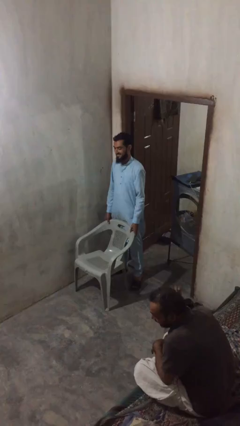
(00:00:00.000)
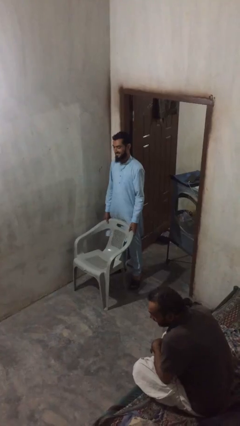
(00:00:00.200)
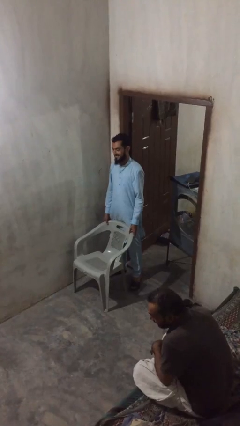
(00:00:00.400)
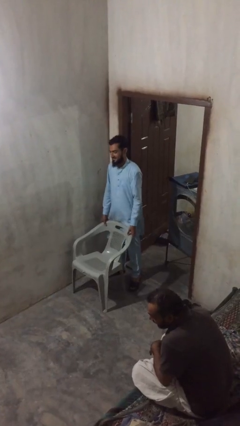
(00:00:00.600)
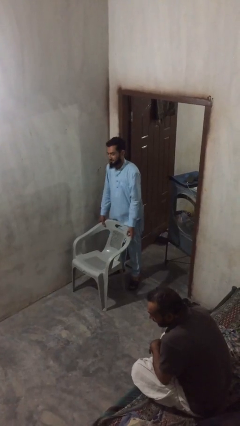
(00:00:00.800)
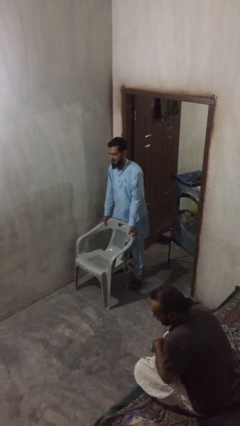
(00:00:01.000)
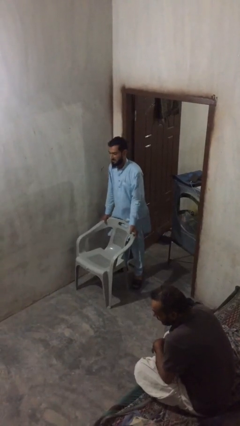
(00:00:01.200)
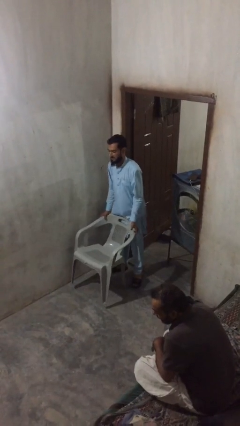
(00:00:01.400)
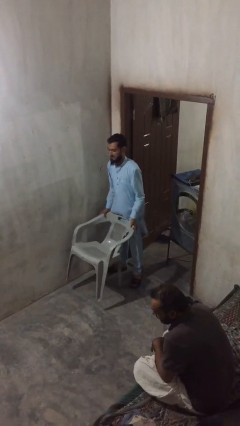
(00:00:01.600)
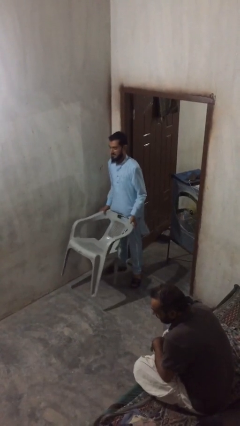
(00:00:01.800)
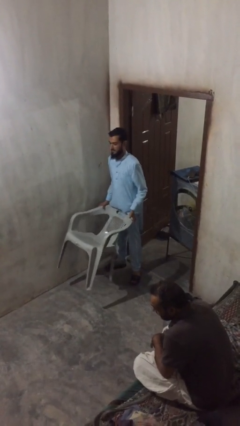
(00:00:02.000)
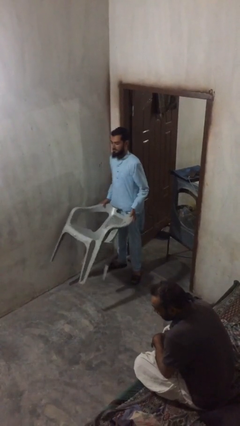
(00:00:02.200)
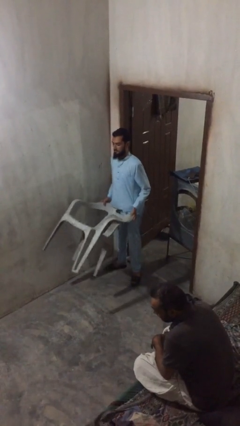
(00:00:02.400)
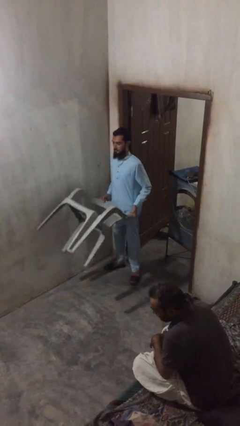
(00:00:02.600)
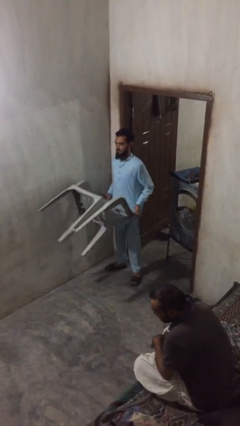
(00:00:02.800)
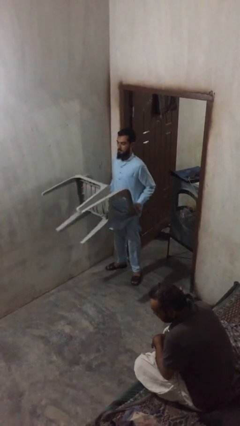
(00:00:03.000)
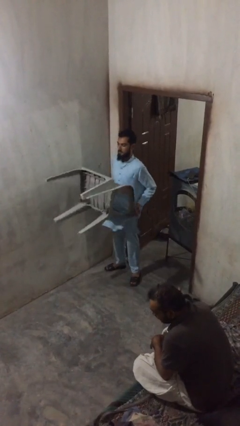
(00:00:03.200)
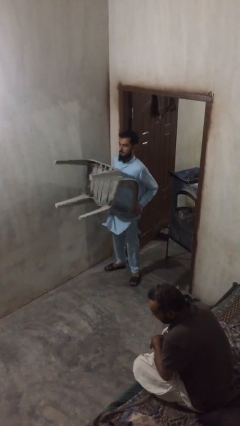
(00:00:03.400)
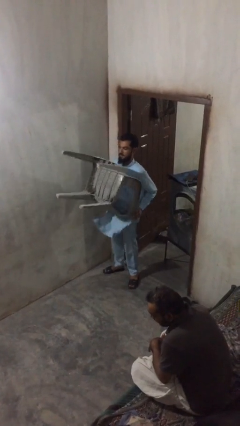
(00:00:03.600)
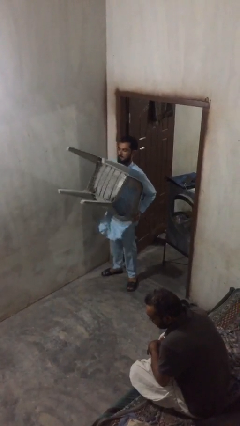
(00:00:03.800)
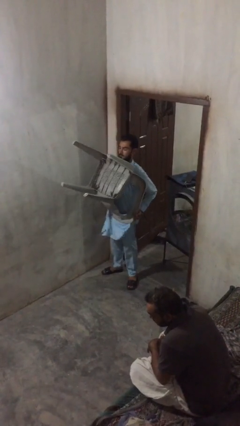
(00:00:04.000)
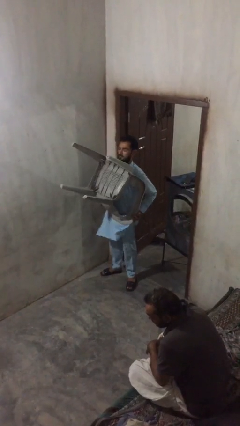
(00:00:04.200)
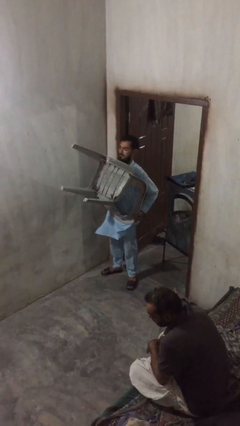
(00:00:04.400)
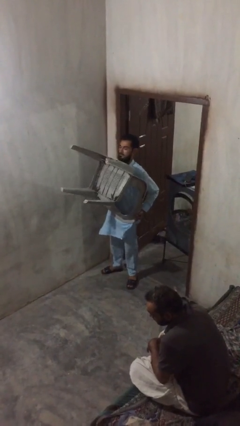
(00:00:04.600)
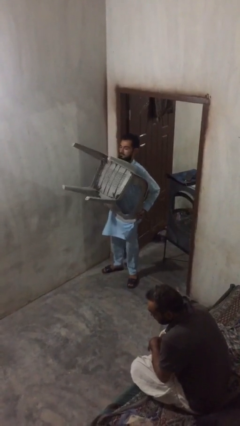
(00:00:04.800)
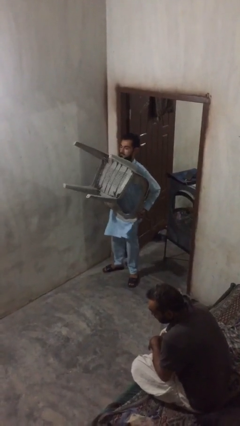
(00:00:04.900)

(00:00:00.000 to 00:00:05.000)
person picks up object from floor

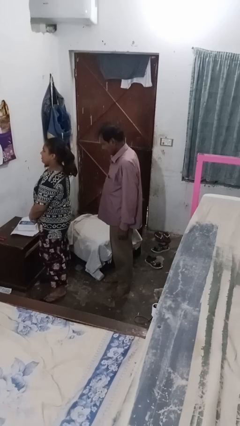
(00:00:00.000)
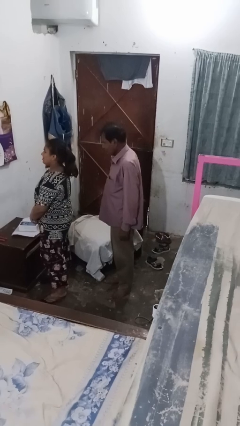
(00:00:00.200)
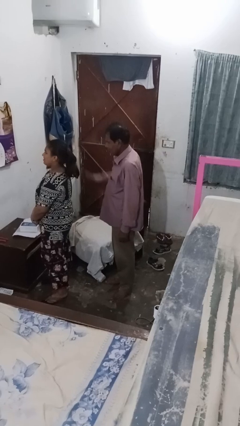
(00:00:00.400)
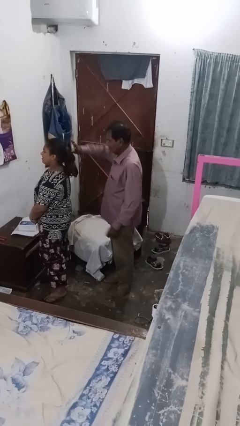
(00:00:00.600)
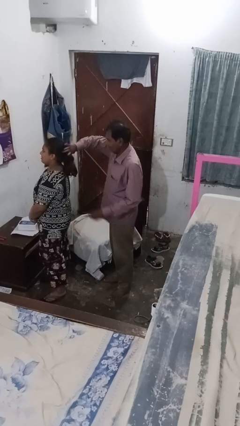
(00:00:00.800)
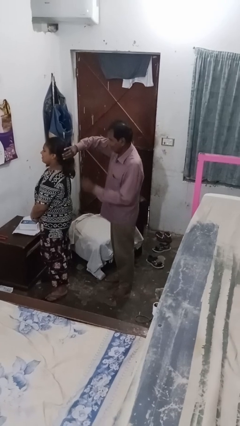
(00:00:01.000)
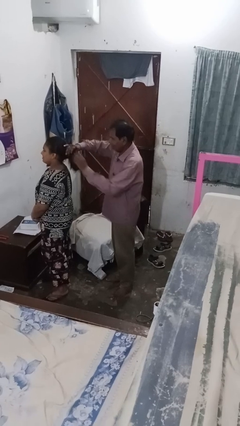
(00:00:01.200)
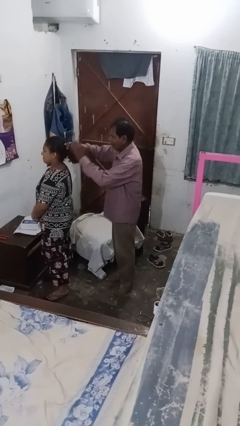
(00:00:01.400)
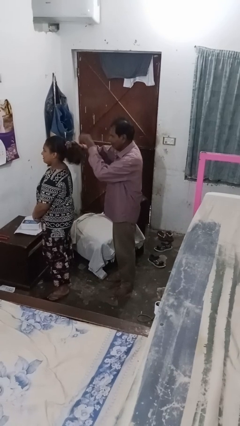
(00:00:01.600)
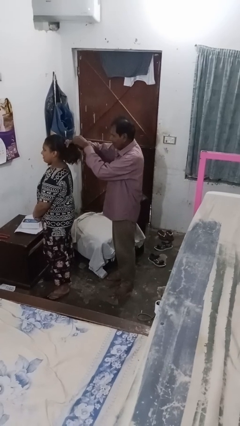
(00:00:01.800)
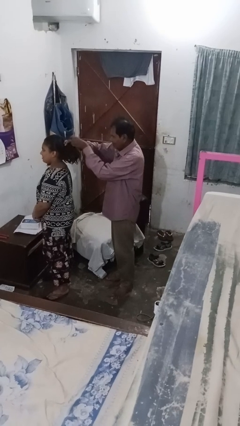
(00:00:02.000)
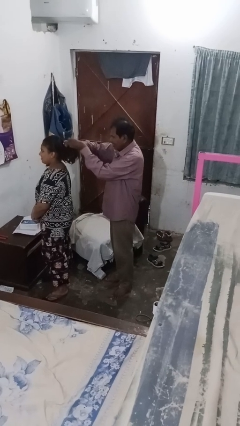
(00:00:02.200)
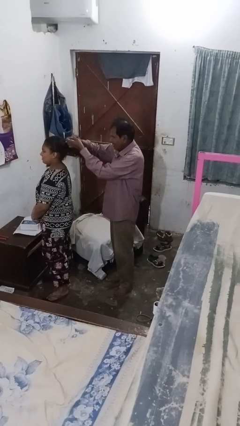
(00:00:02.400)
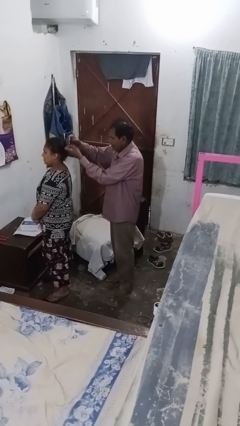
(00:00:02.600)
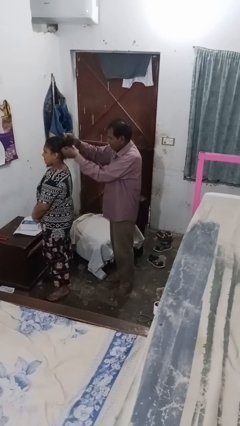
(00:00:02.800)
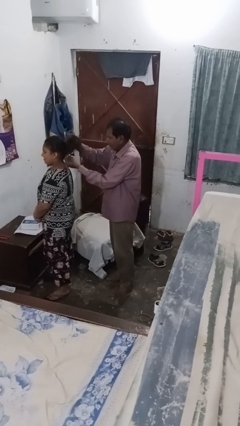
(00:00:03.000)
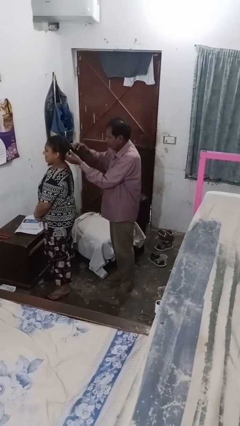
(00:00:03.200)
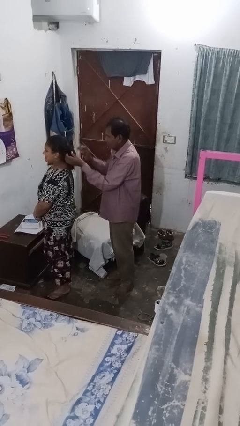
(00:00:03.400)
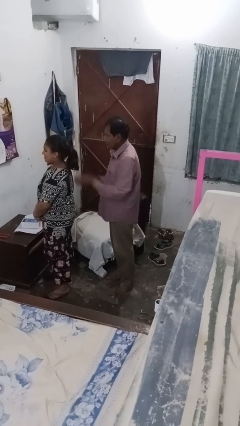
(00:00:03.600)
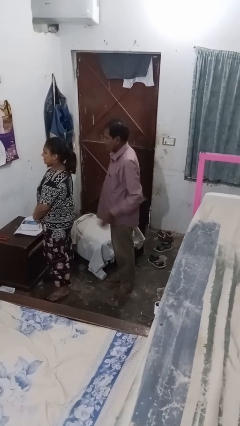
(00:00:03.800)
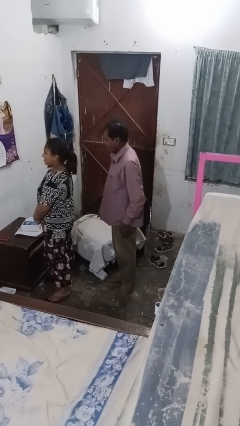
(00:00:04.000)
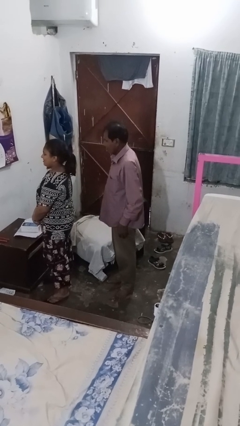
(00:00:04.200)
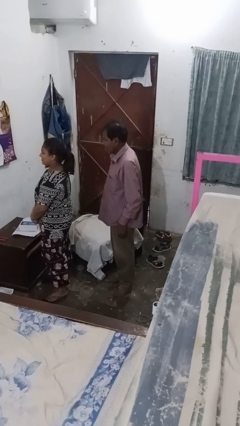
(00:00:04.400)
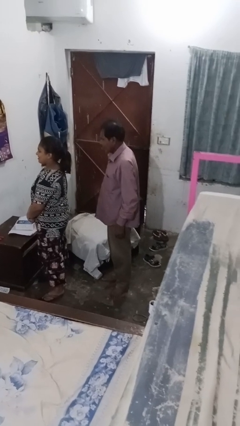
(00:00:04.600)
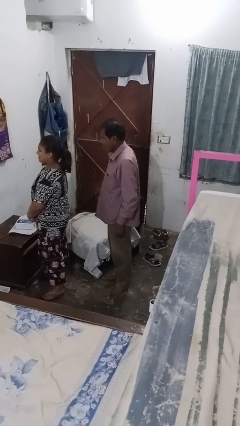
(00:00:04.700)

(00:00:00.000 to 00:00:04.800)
person braids hair of person

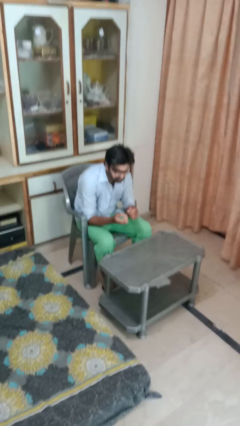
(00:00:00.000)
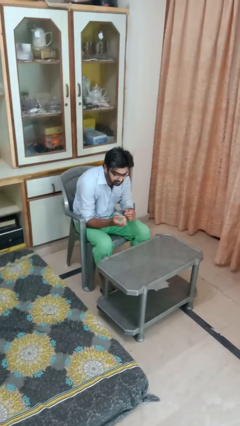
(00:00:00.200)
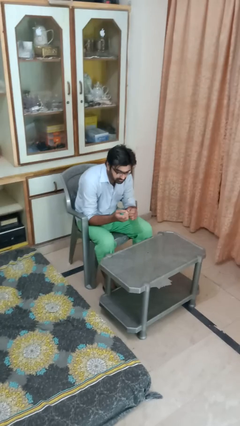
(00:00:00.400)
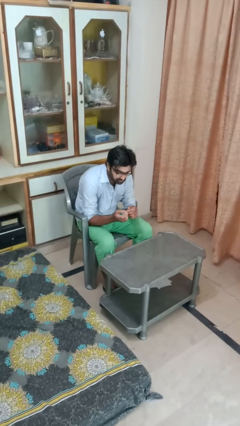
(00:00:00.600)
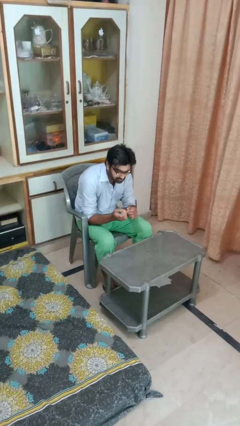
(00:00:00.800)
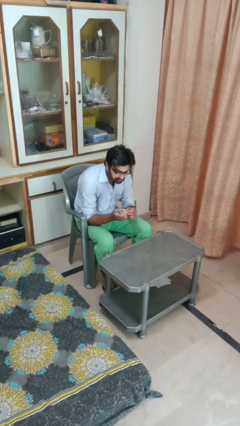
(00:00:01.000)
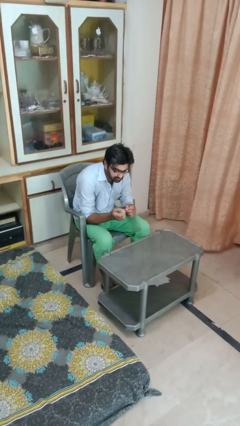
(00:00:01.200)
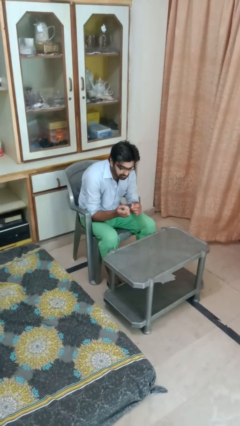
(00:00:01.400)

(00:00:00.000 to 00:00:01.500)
person files fingernails

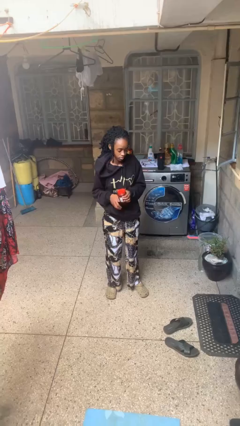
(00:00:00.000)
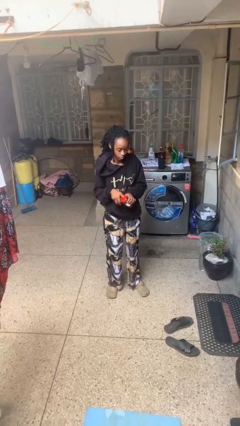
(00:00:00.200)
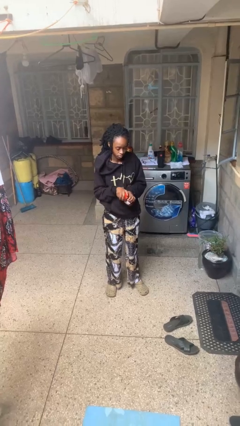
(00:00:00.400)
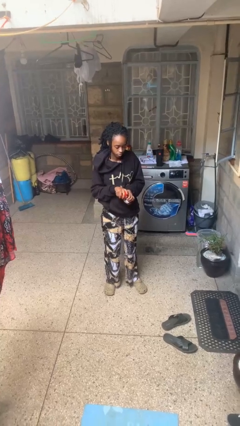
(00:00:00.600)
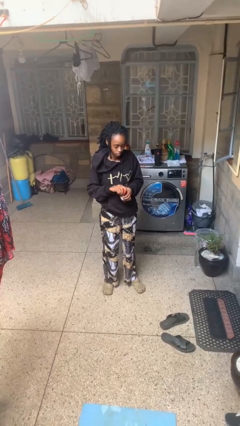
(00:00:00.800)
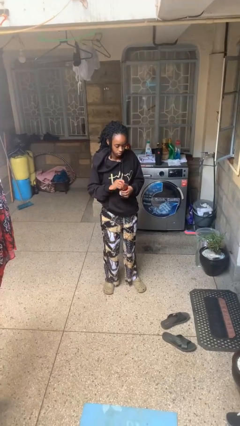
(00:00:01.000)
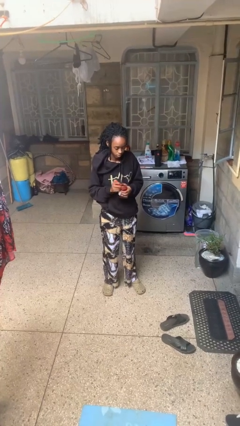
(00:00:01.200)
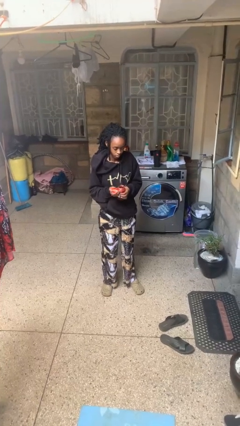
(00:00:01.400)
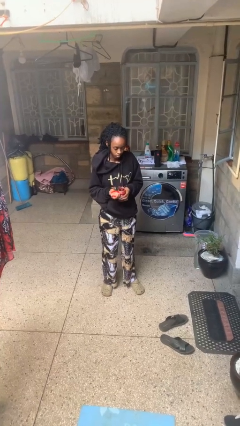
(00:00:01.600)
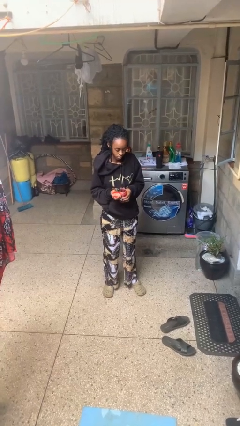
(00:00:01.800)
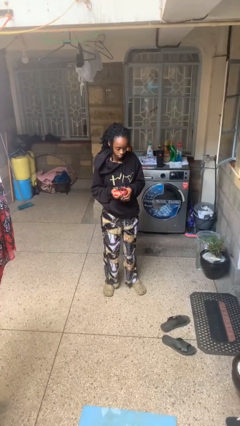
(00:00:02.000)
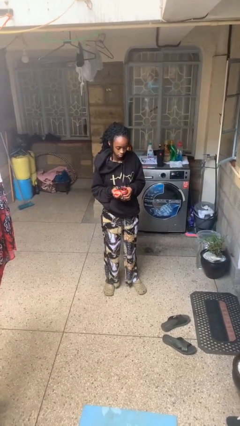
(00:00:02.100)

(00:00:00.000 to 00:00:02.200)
person opens jar

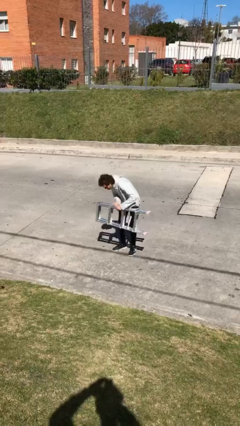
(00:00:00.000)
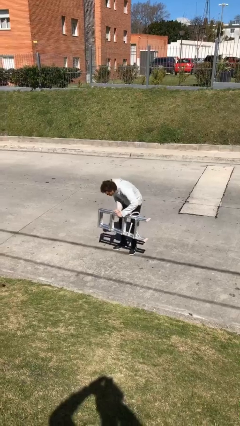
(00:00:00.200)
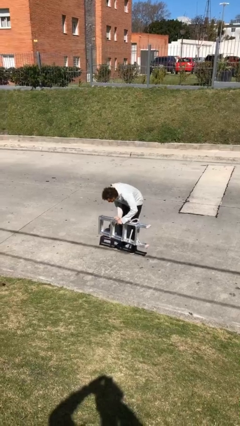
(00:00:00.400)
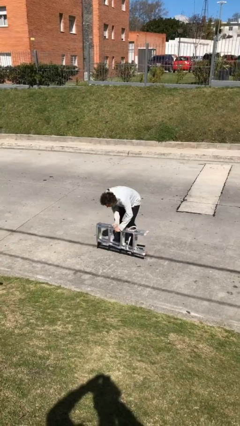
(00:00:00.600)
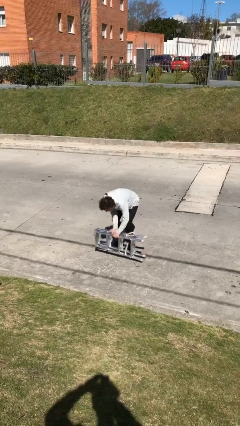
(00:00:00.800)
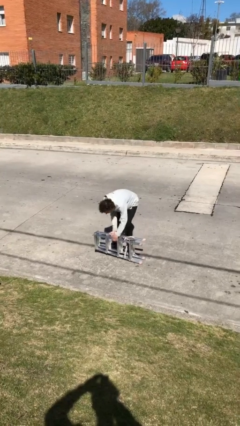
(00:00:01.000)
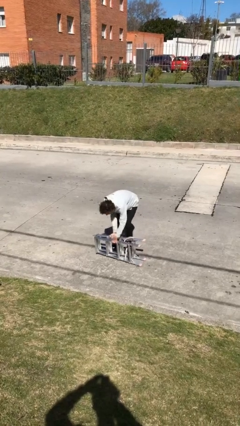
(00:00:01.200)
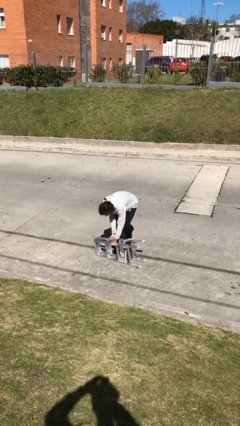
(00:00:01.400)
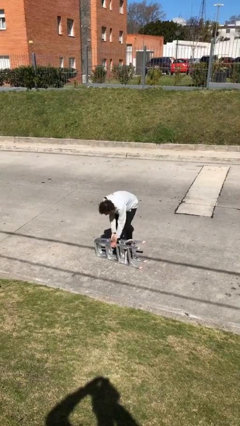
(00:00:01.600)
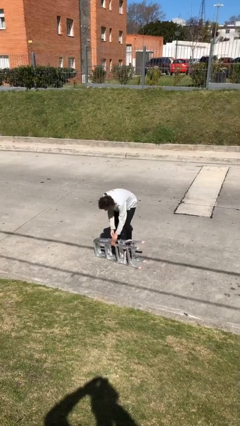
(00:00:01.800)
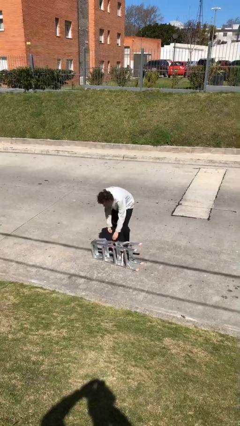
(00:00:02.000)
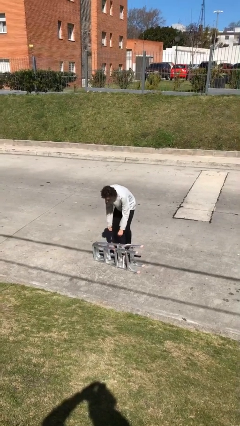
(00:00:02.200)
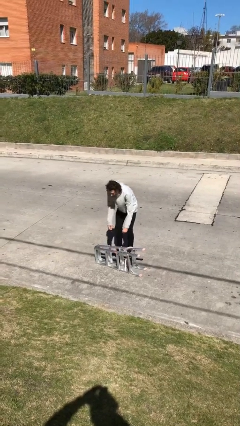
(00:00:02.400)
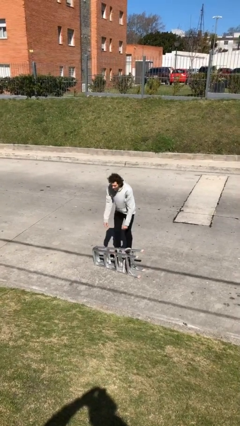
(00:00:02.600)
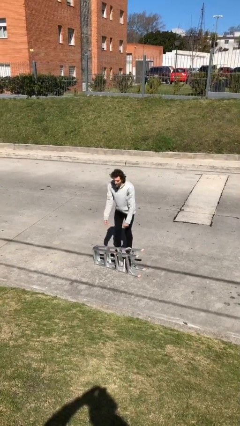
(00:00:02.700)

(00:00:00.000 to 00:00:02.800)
person puts down object on floor

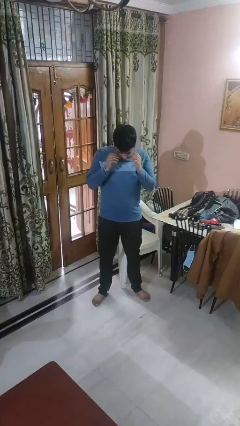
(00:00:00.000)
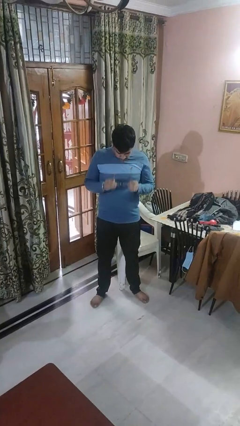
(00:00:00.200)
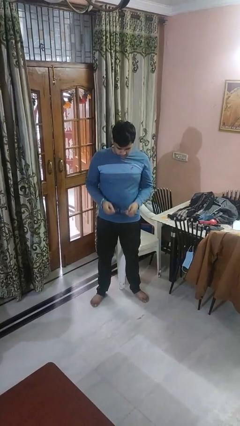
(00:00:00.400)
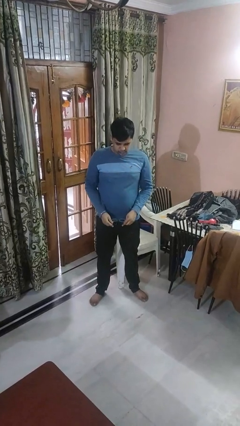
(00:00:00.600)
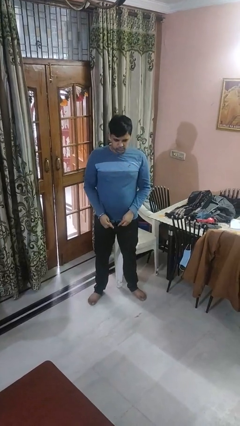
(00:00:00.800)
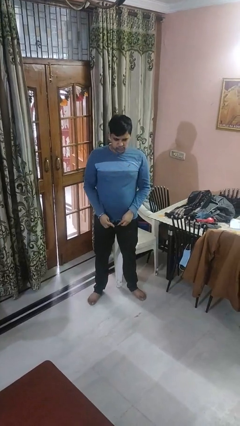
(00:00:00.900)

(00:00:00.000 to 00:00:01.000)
person takes off glasses
